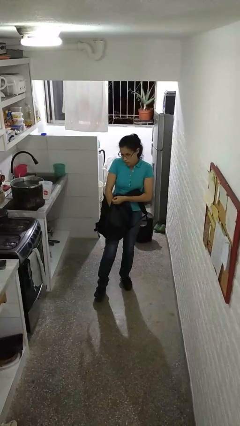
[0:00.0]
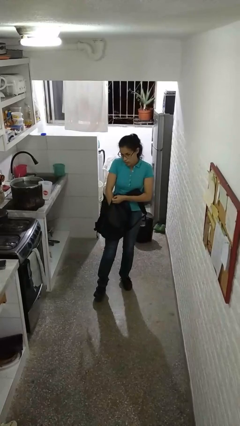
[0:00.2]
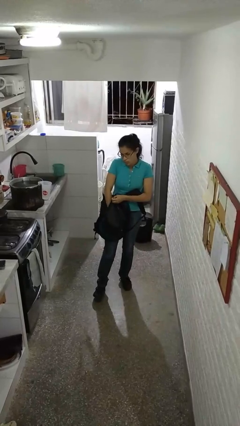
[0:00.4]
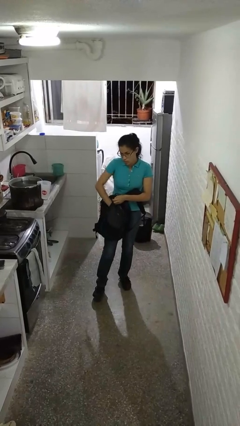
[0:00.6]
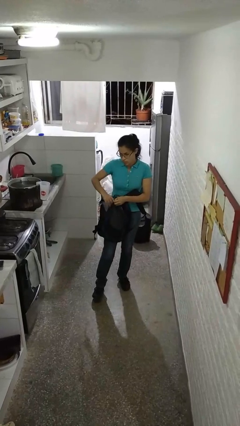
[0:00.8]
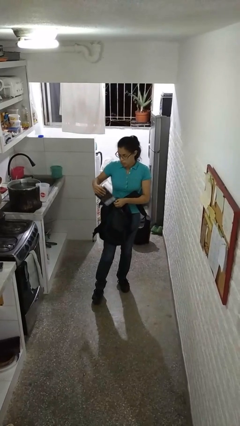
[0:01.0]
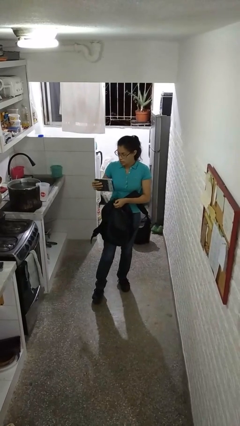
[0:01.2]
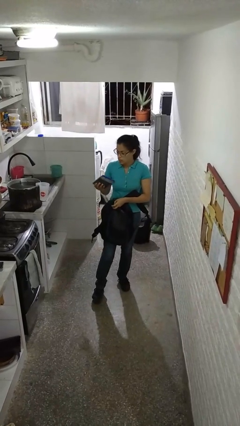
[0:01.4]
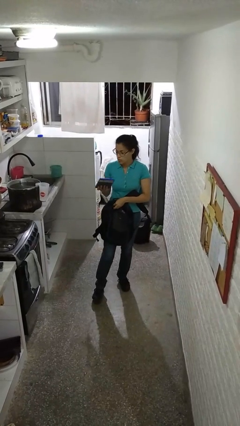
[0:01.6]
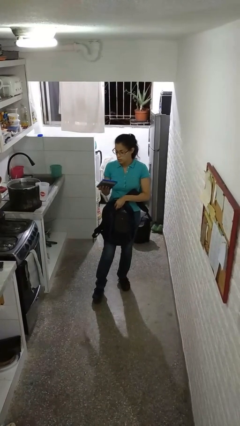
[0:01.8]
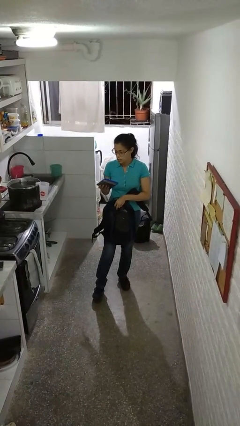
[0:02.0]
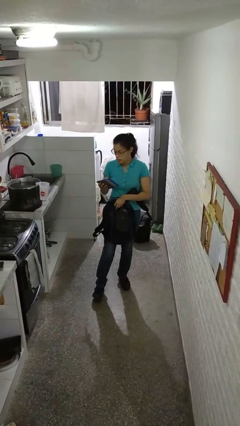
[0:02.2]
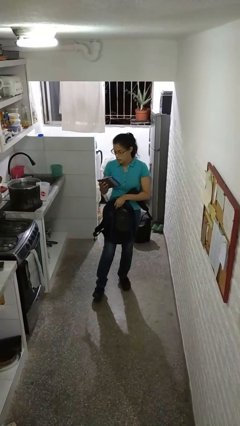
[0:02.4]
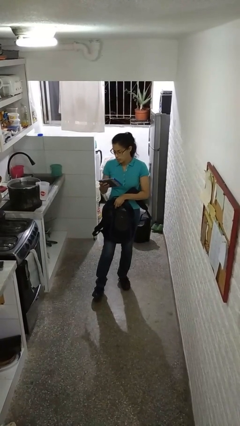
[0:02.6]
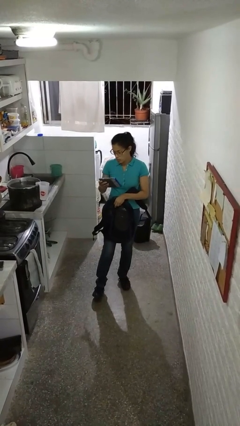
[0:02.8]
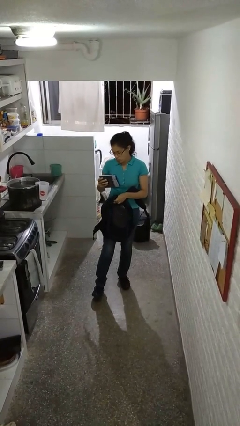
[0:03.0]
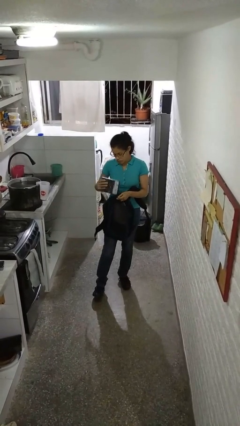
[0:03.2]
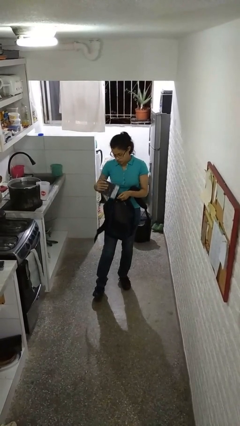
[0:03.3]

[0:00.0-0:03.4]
person takes object from backpack

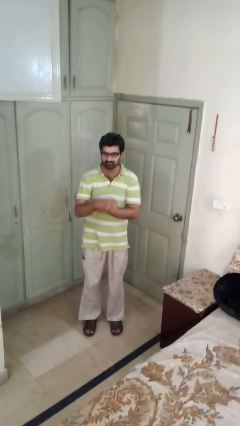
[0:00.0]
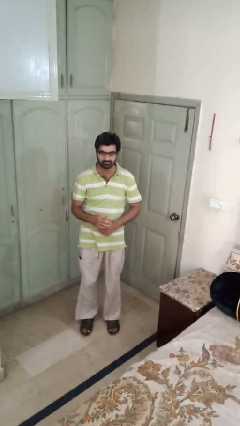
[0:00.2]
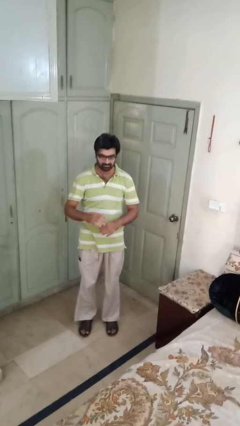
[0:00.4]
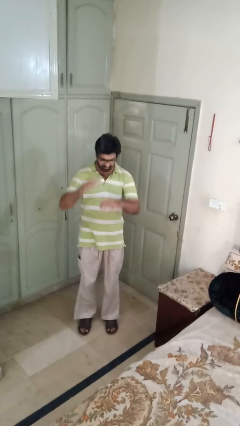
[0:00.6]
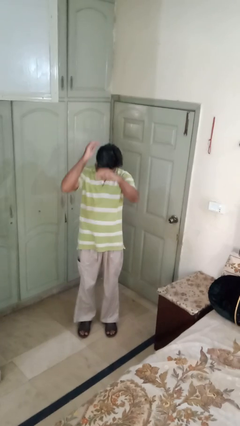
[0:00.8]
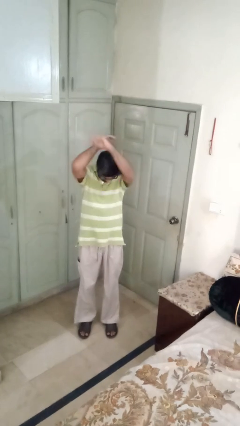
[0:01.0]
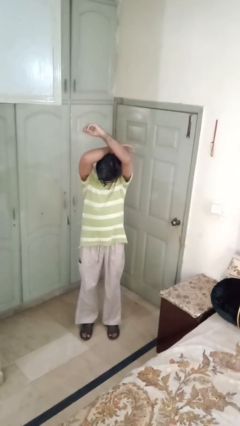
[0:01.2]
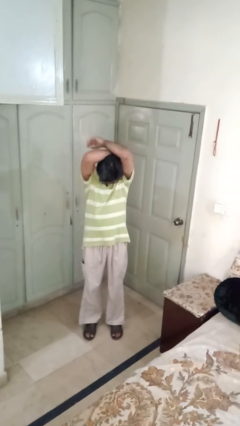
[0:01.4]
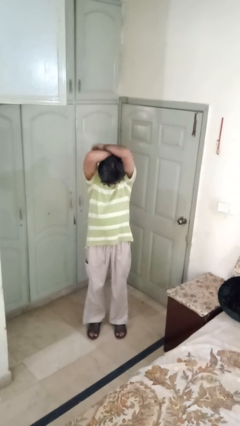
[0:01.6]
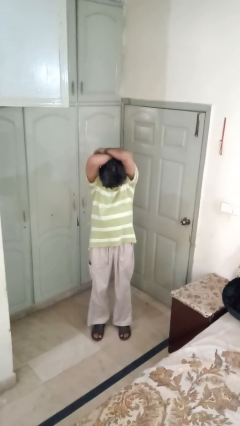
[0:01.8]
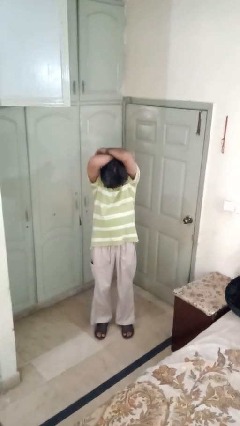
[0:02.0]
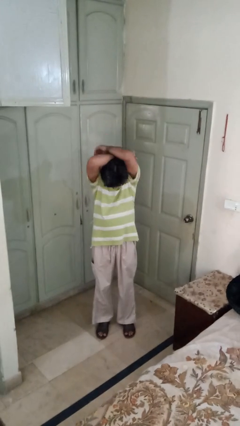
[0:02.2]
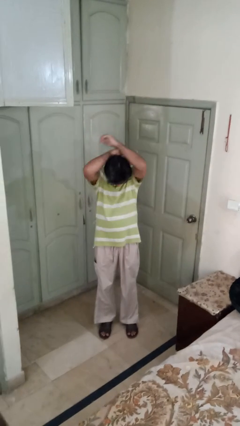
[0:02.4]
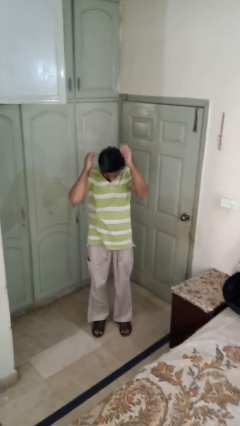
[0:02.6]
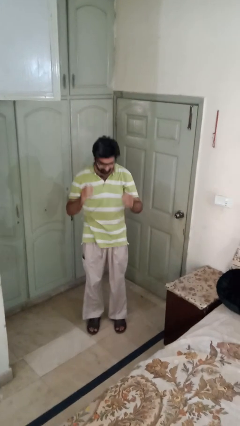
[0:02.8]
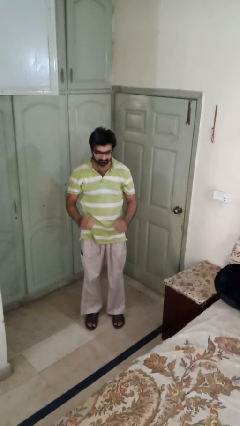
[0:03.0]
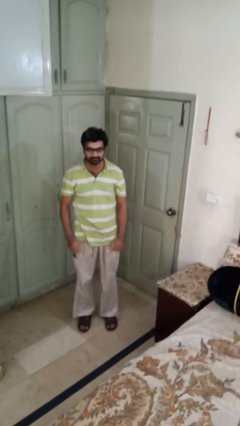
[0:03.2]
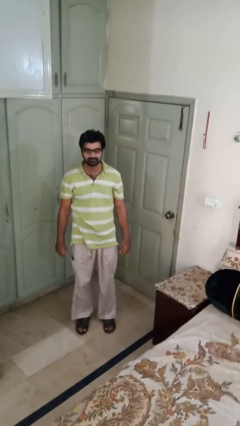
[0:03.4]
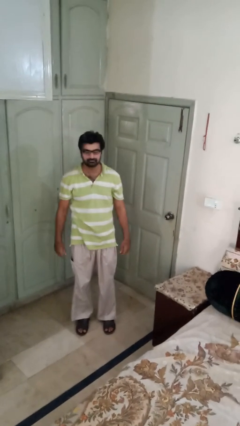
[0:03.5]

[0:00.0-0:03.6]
person stretches arms over head

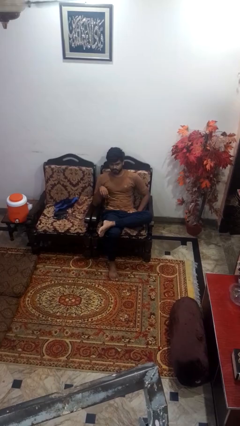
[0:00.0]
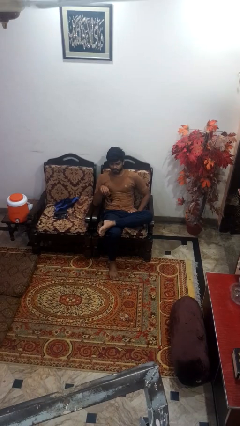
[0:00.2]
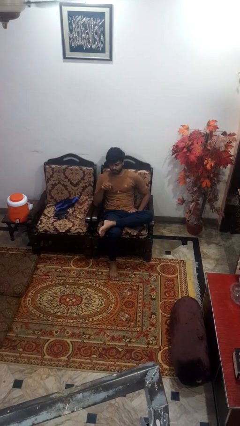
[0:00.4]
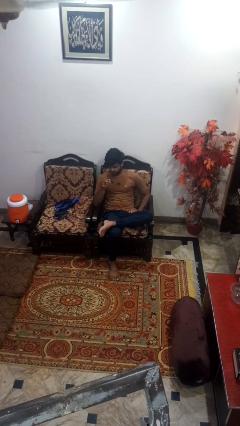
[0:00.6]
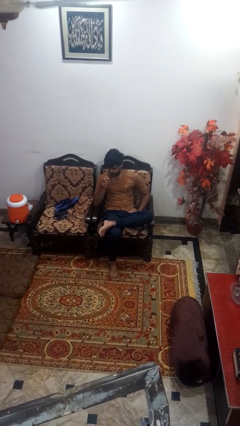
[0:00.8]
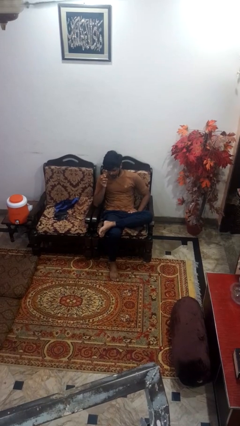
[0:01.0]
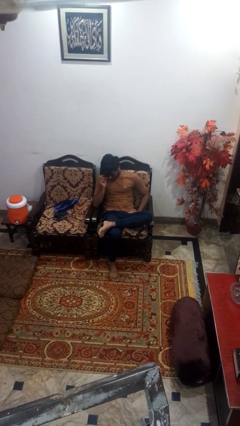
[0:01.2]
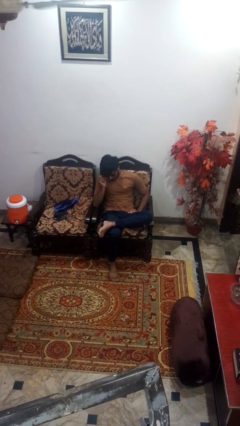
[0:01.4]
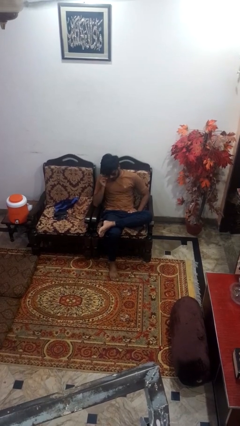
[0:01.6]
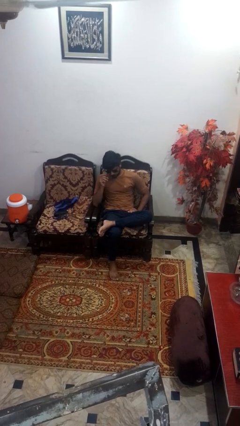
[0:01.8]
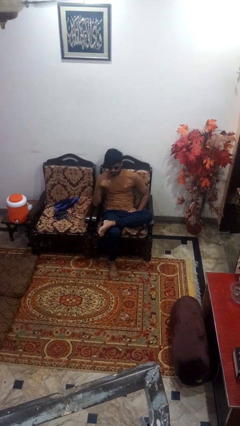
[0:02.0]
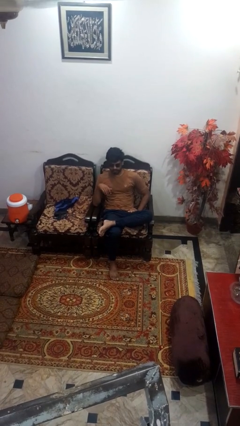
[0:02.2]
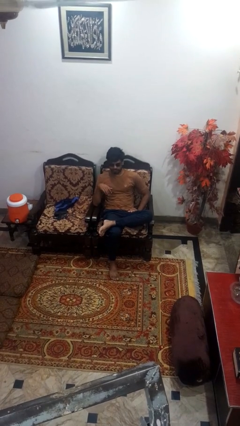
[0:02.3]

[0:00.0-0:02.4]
person puts on sunglasses

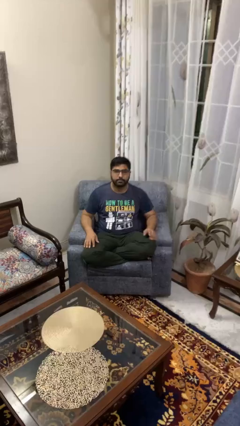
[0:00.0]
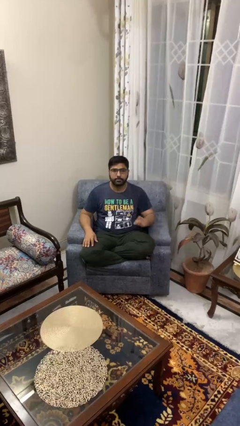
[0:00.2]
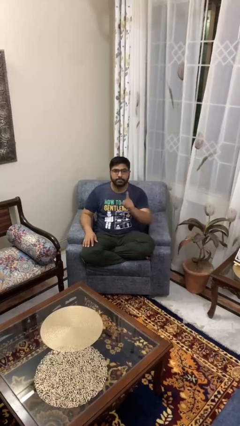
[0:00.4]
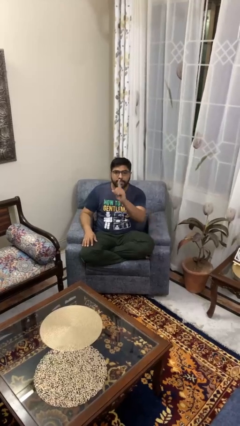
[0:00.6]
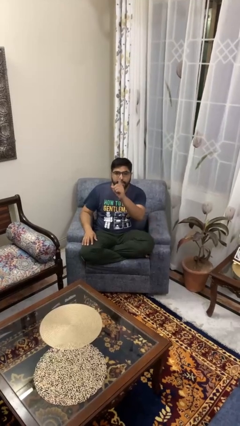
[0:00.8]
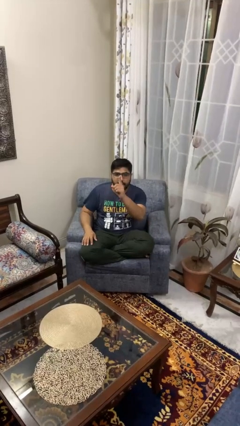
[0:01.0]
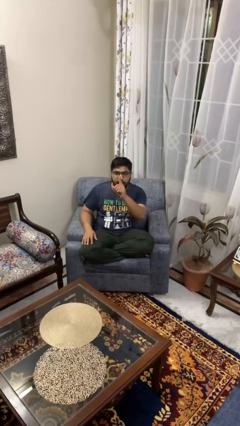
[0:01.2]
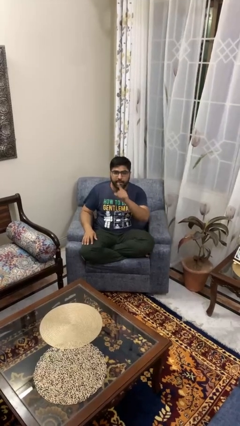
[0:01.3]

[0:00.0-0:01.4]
person gestures number one

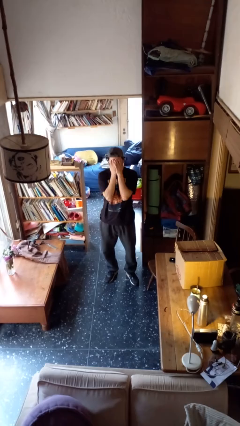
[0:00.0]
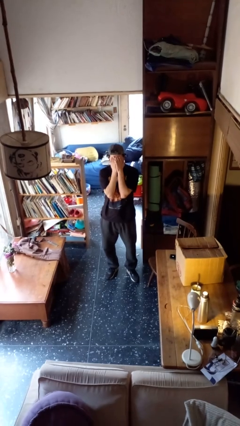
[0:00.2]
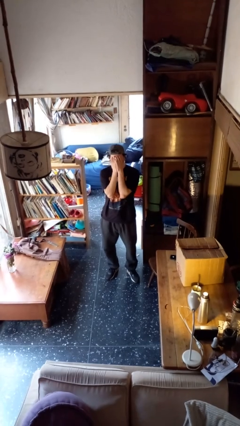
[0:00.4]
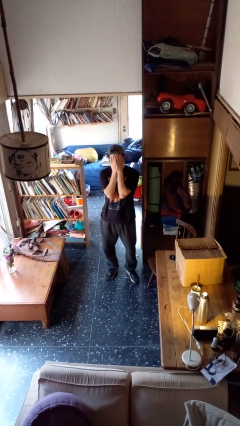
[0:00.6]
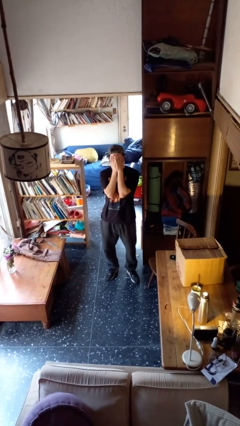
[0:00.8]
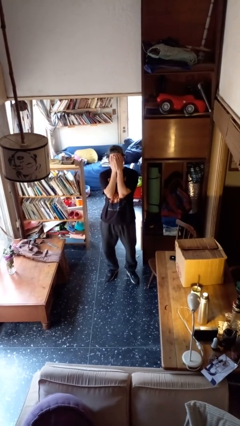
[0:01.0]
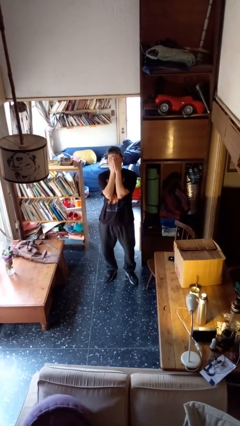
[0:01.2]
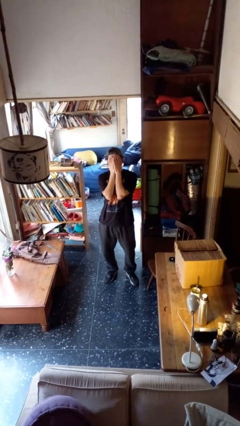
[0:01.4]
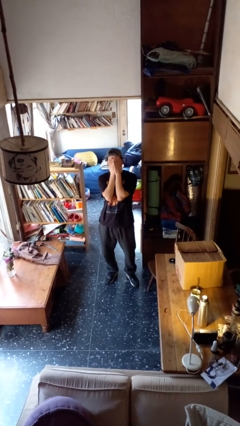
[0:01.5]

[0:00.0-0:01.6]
person covers face with hands

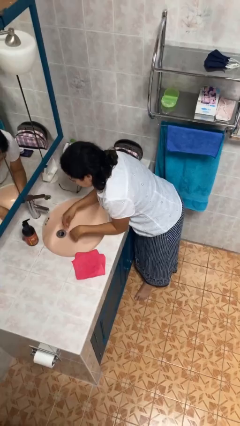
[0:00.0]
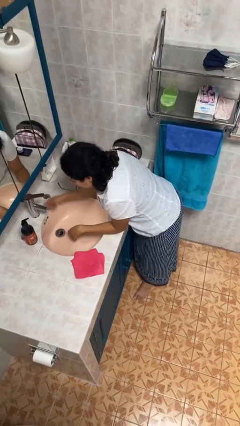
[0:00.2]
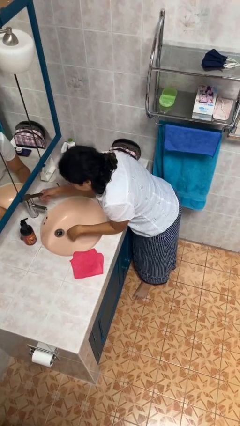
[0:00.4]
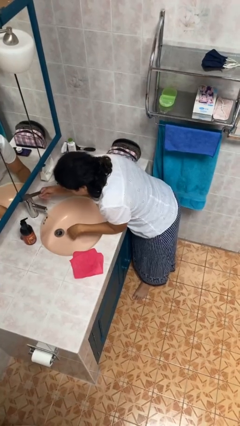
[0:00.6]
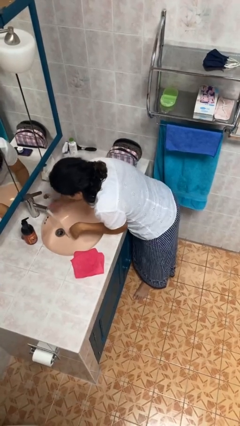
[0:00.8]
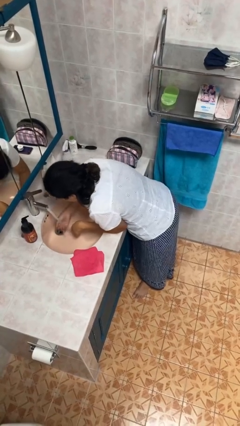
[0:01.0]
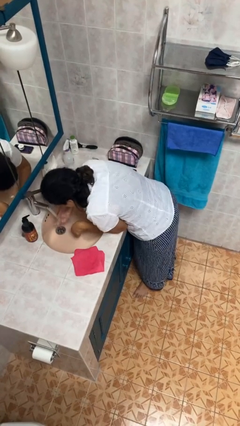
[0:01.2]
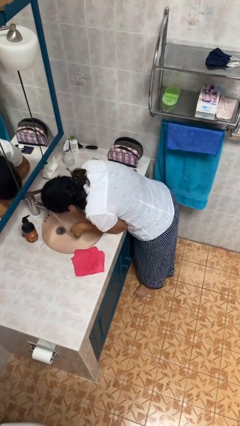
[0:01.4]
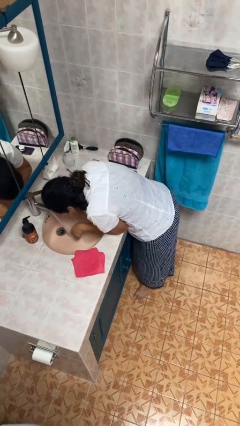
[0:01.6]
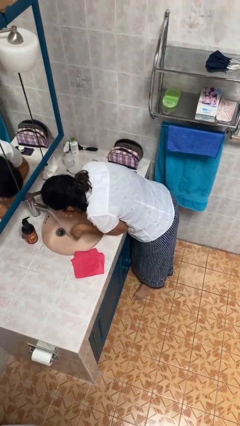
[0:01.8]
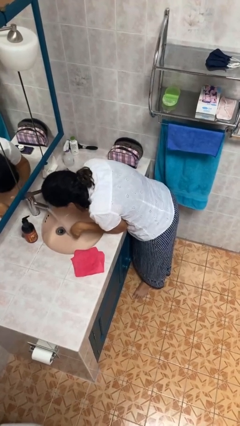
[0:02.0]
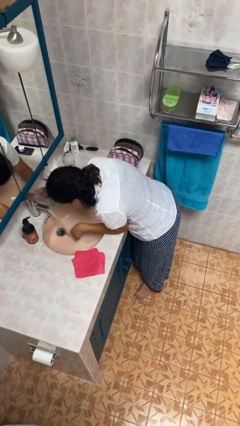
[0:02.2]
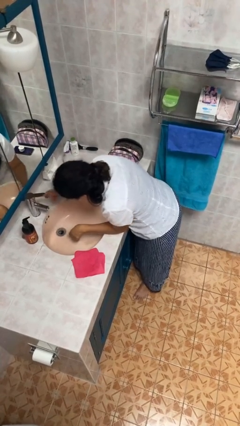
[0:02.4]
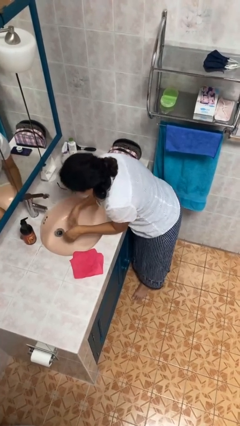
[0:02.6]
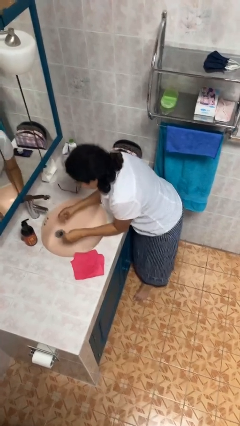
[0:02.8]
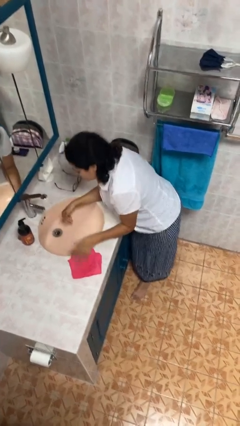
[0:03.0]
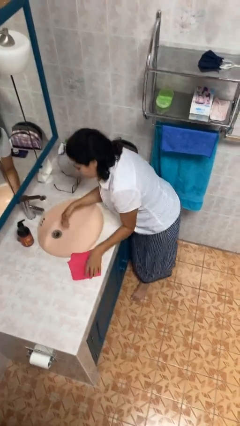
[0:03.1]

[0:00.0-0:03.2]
person washes face

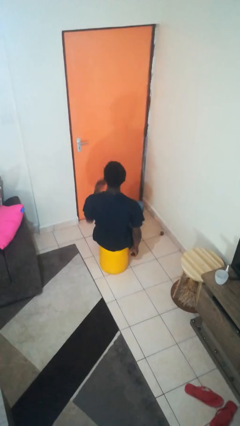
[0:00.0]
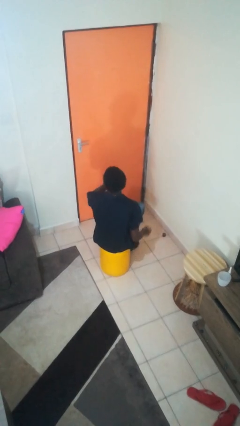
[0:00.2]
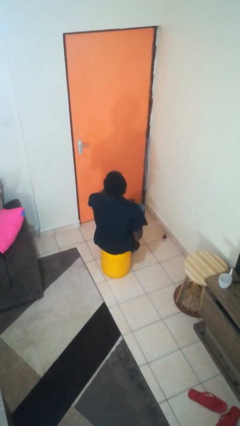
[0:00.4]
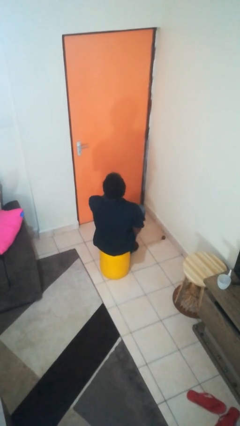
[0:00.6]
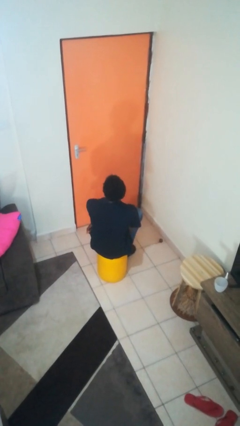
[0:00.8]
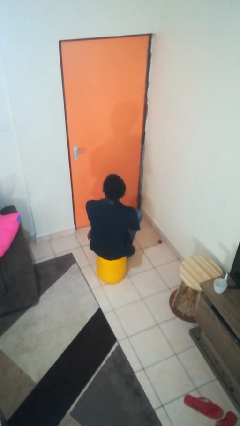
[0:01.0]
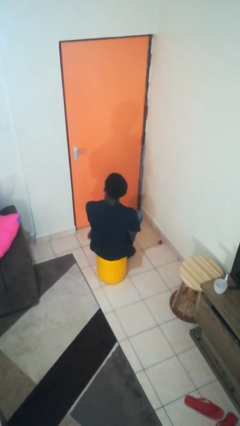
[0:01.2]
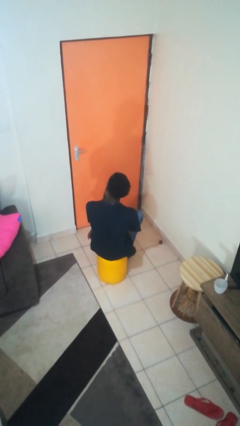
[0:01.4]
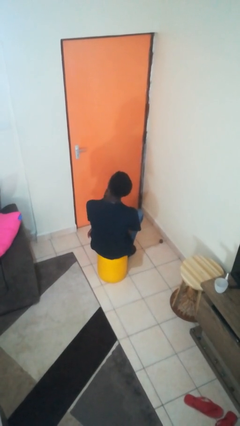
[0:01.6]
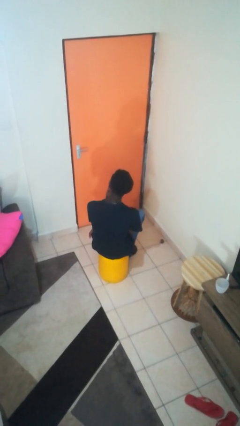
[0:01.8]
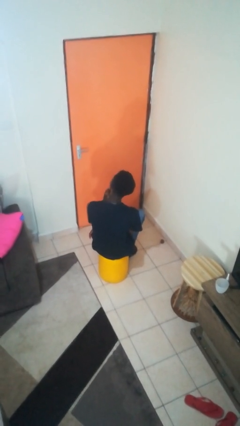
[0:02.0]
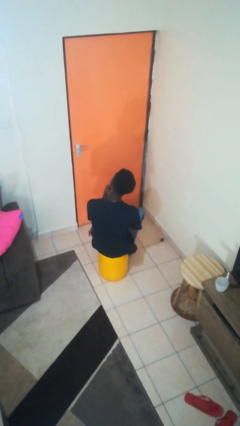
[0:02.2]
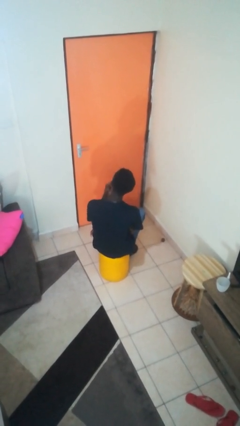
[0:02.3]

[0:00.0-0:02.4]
person strokes chin
